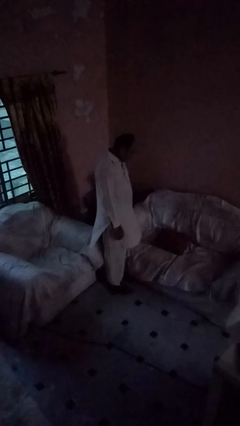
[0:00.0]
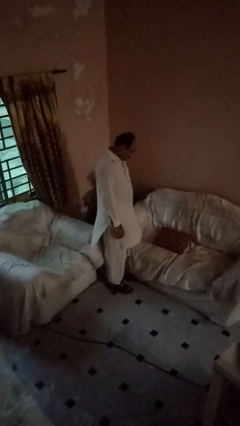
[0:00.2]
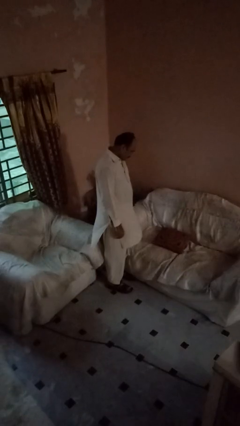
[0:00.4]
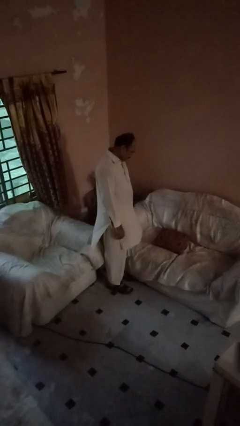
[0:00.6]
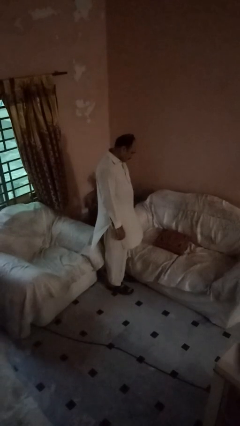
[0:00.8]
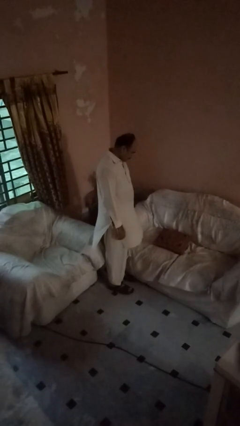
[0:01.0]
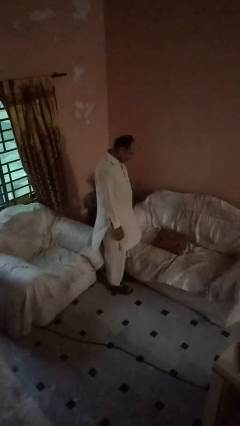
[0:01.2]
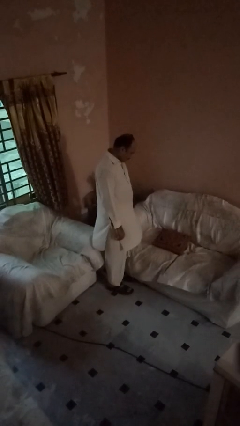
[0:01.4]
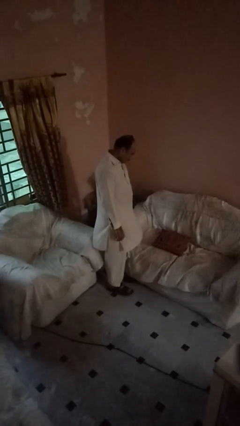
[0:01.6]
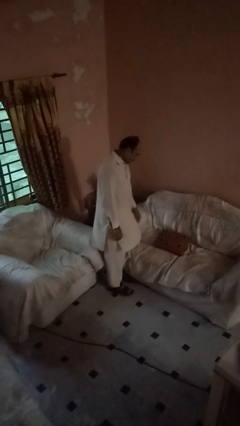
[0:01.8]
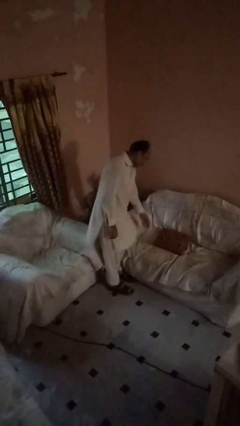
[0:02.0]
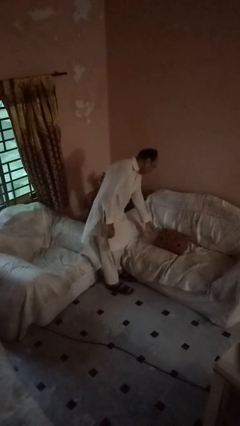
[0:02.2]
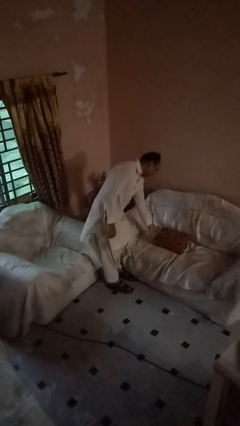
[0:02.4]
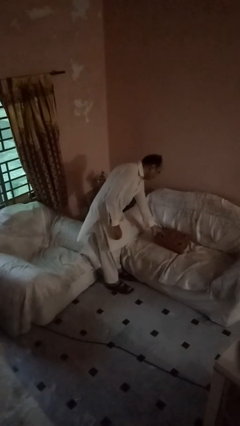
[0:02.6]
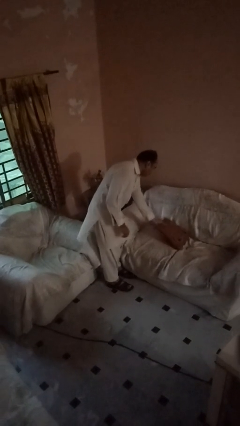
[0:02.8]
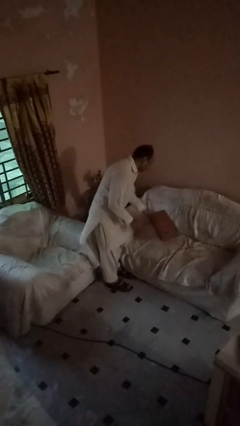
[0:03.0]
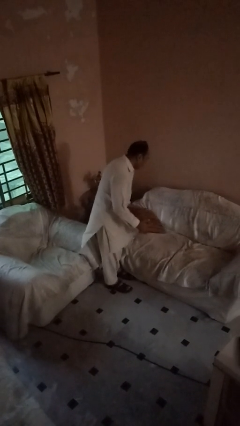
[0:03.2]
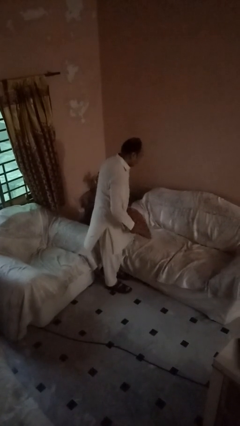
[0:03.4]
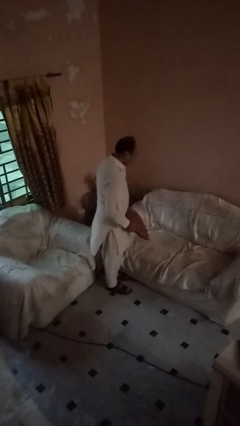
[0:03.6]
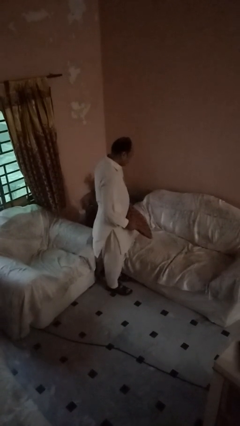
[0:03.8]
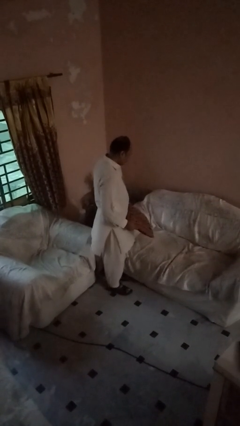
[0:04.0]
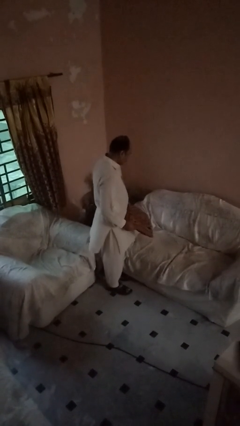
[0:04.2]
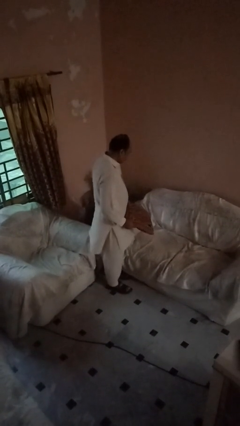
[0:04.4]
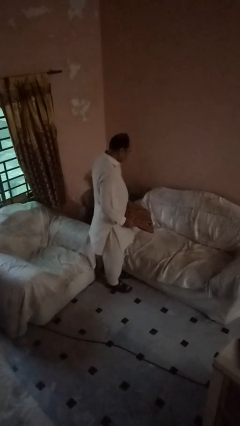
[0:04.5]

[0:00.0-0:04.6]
person picks up object from couch

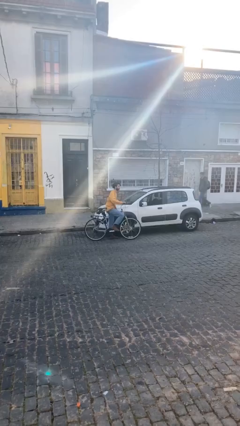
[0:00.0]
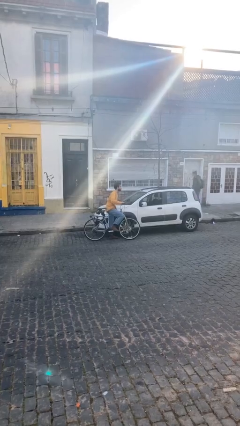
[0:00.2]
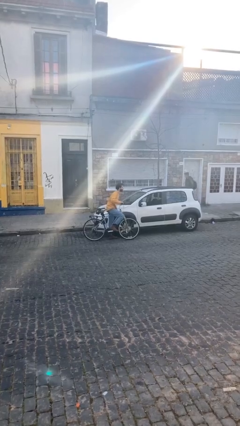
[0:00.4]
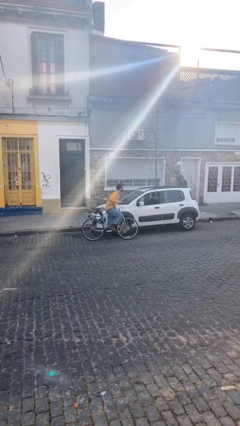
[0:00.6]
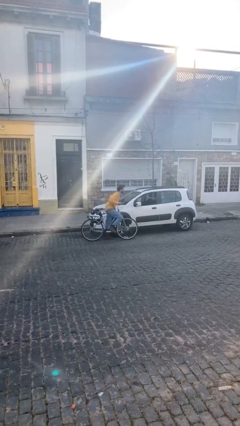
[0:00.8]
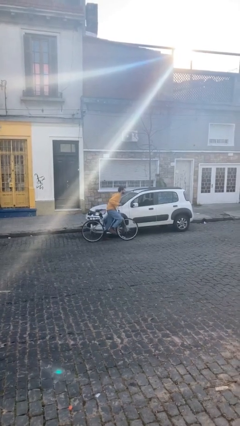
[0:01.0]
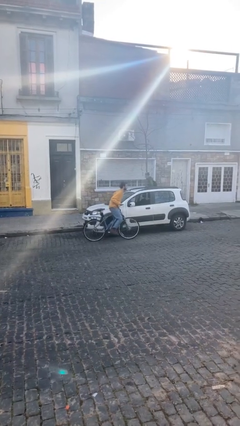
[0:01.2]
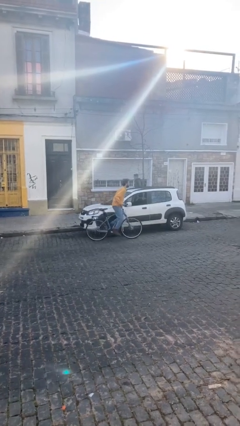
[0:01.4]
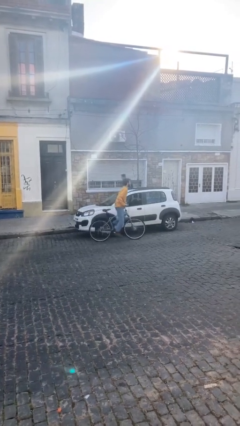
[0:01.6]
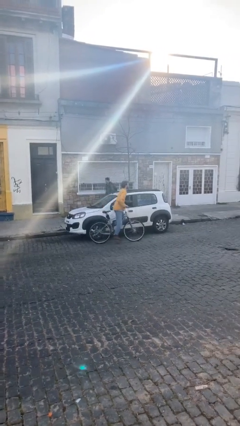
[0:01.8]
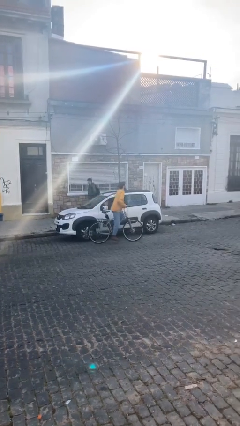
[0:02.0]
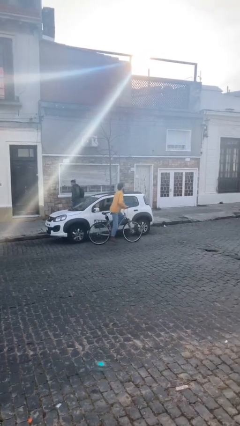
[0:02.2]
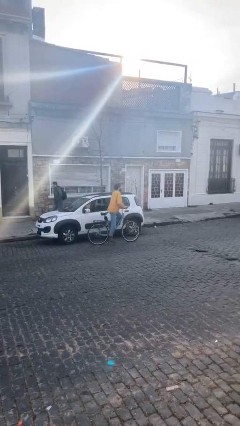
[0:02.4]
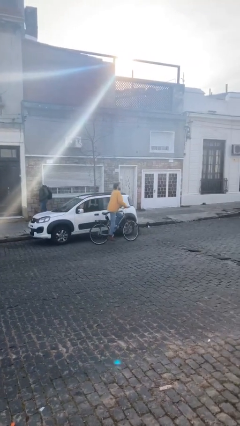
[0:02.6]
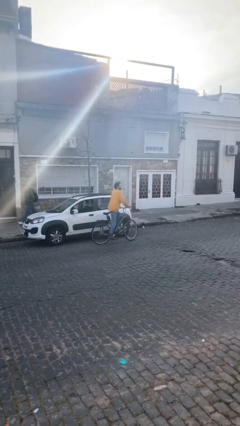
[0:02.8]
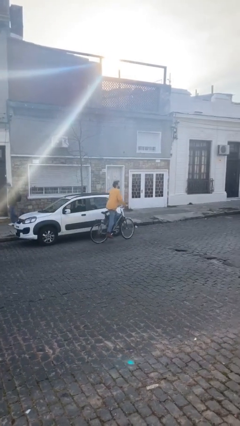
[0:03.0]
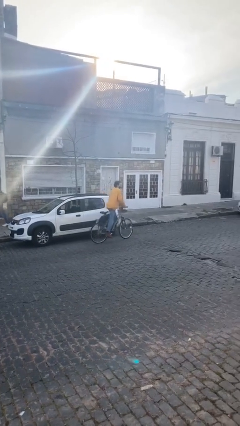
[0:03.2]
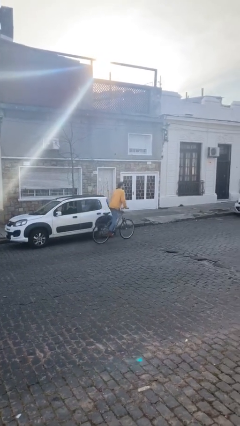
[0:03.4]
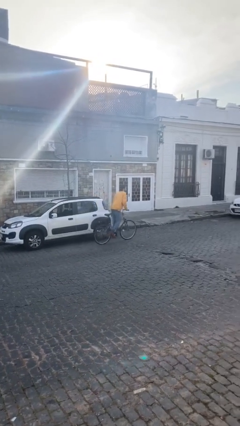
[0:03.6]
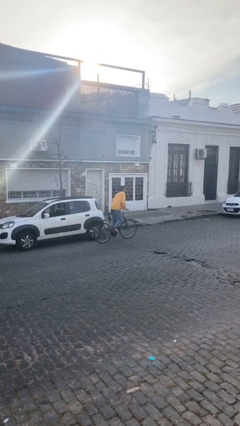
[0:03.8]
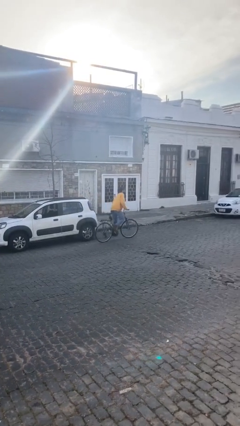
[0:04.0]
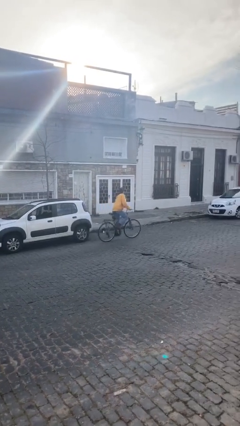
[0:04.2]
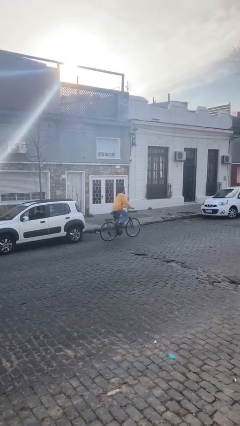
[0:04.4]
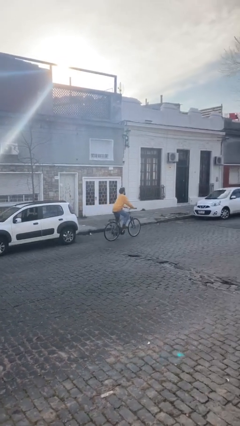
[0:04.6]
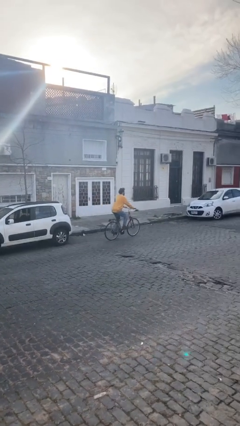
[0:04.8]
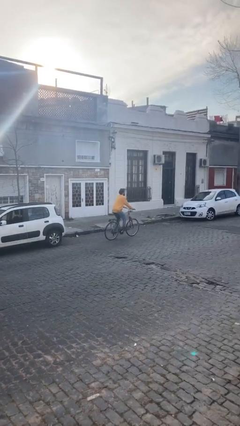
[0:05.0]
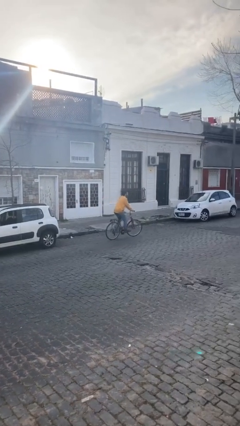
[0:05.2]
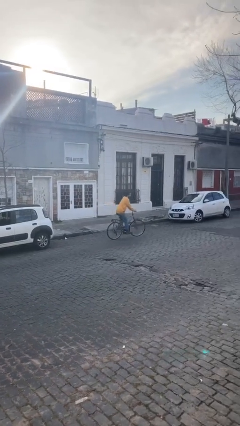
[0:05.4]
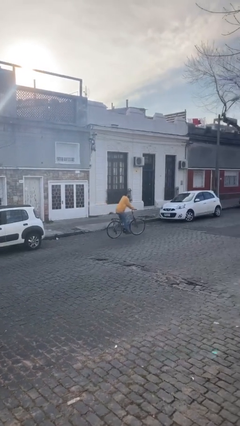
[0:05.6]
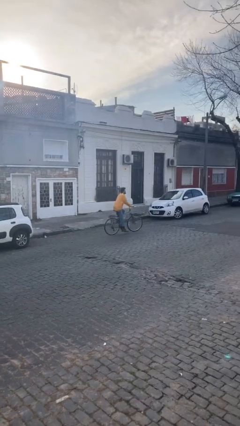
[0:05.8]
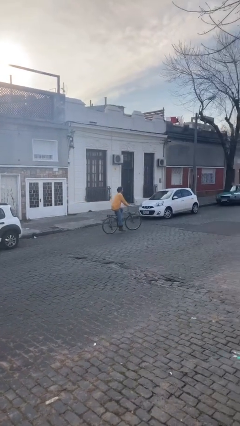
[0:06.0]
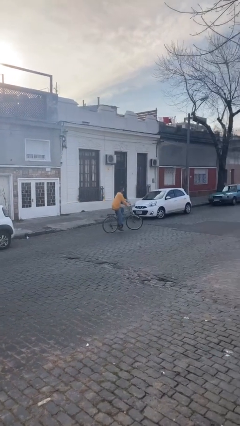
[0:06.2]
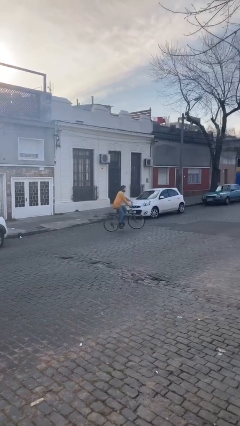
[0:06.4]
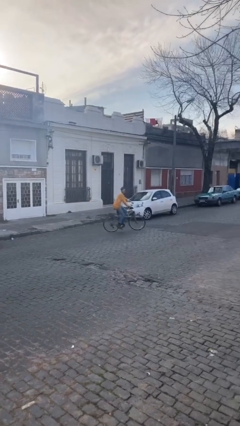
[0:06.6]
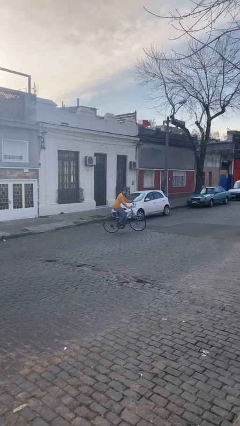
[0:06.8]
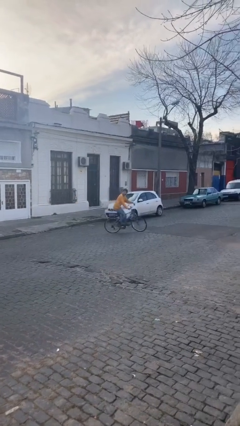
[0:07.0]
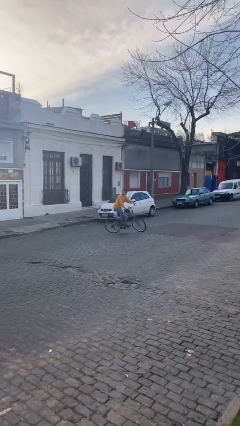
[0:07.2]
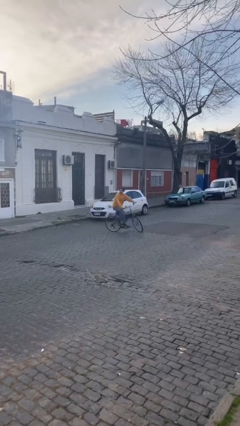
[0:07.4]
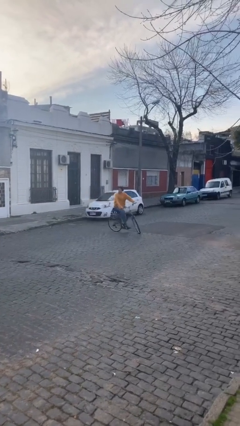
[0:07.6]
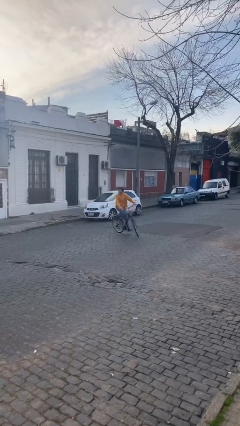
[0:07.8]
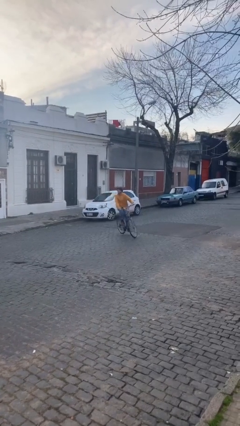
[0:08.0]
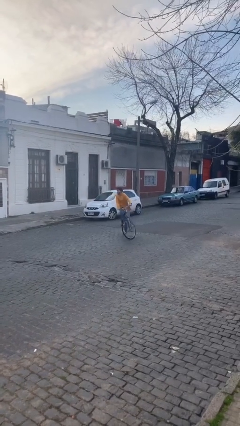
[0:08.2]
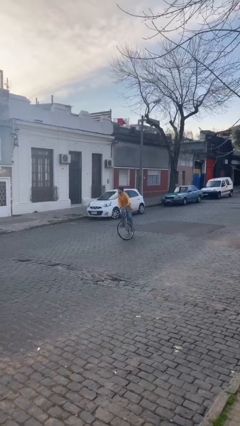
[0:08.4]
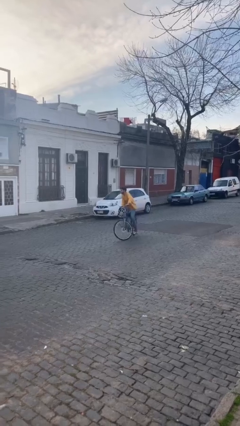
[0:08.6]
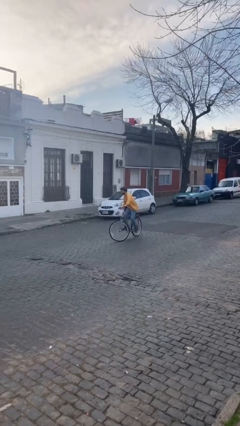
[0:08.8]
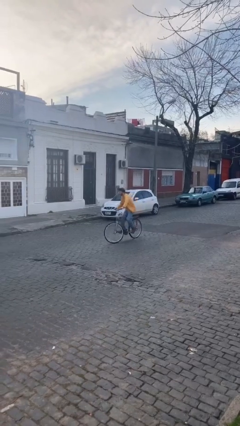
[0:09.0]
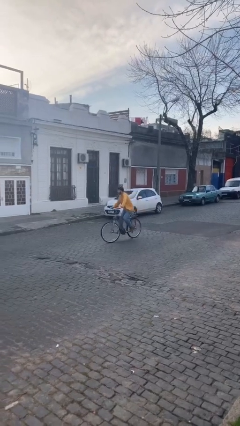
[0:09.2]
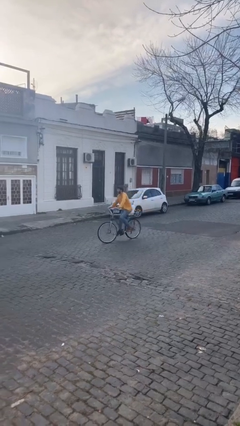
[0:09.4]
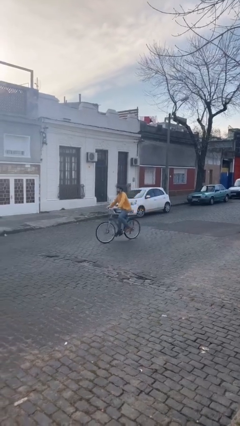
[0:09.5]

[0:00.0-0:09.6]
person rides bicycle

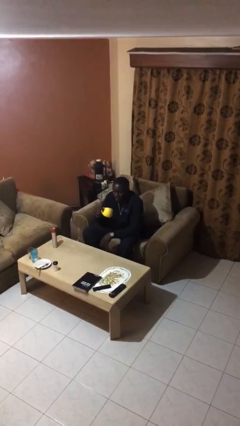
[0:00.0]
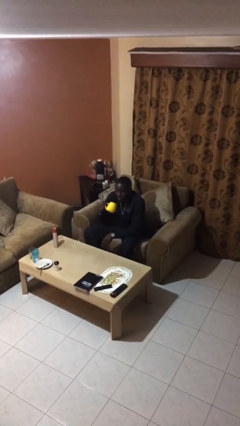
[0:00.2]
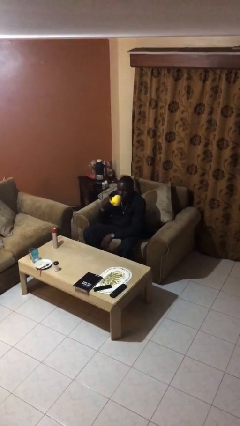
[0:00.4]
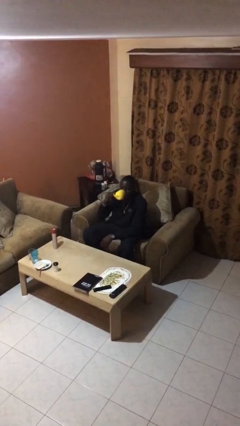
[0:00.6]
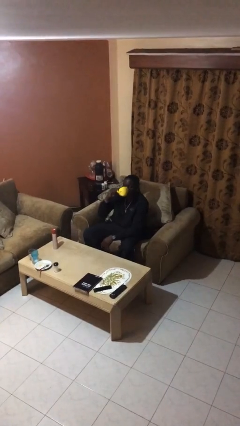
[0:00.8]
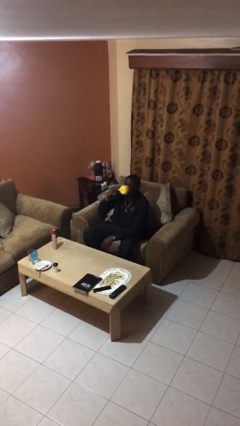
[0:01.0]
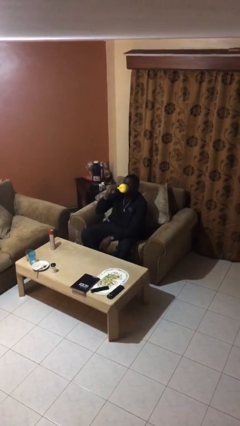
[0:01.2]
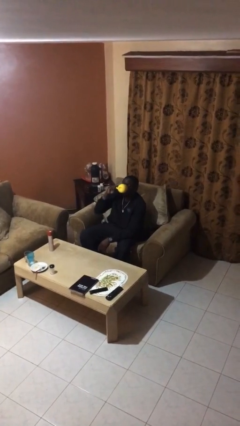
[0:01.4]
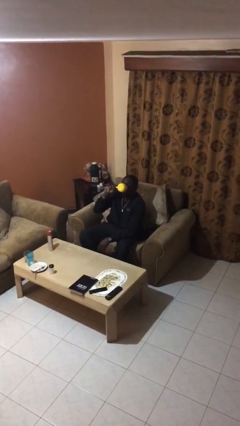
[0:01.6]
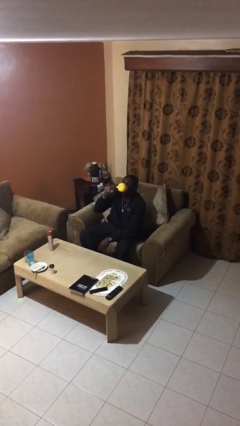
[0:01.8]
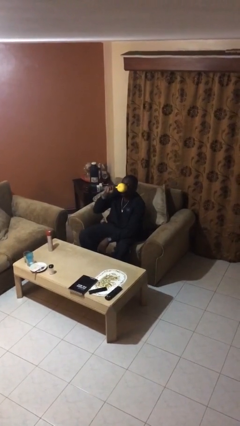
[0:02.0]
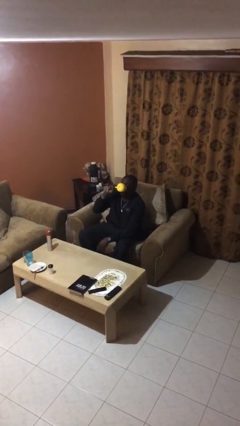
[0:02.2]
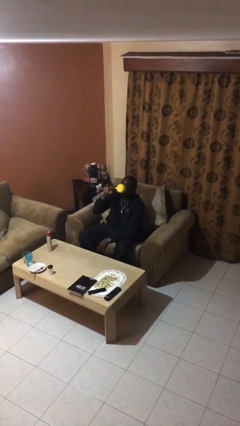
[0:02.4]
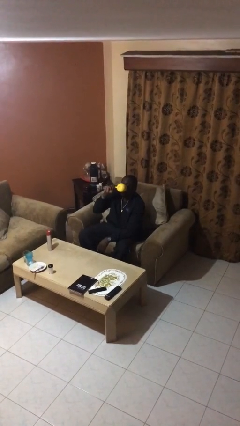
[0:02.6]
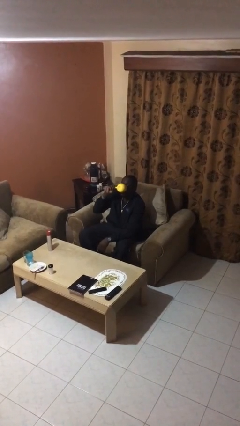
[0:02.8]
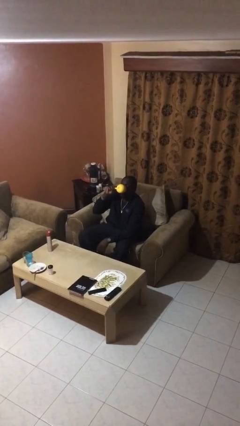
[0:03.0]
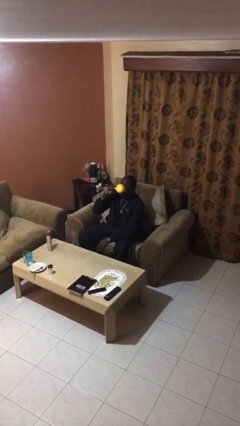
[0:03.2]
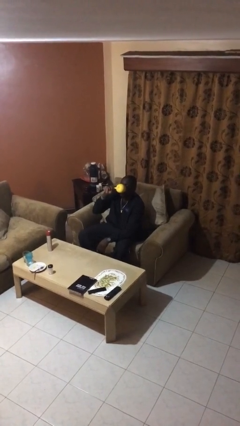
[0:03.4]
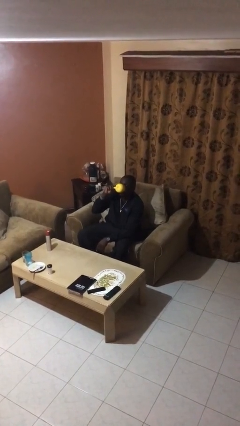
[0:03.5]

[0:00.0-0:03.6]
person drinks from mug
